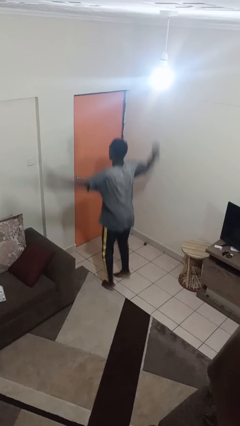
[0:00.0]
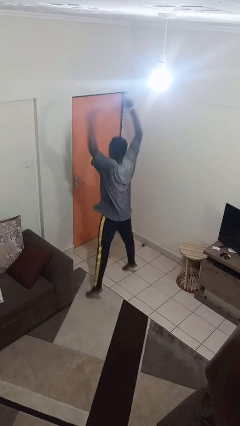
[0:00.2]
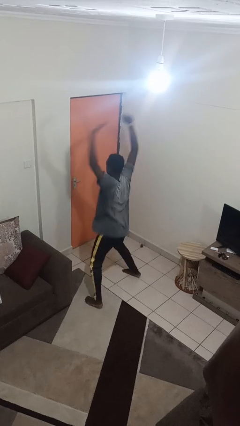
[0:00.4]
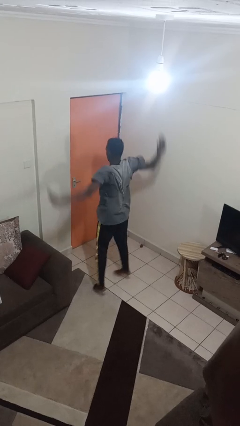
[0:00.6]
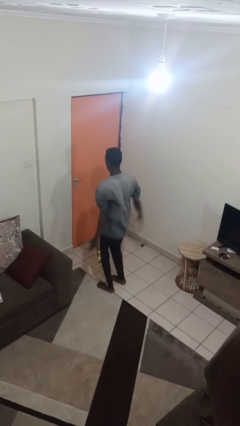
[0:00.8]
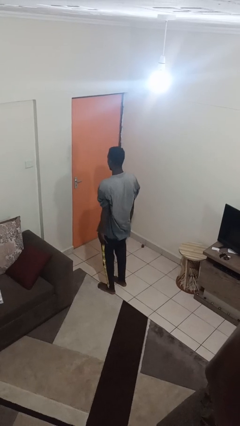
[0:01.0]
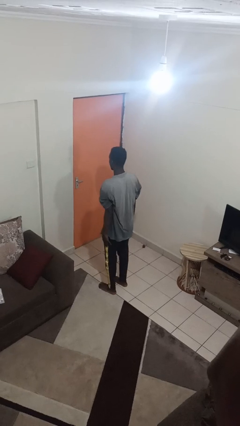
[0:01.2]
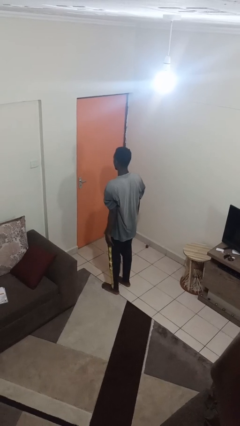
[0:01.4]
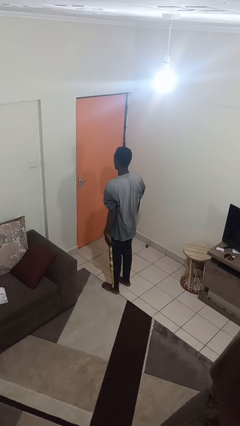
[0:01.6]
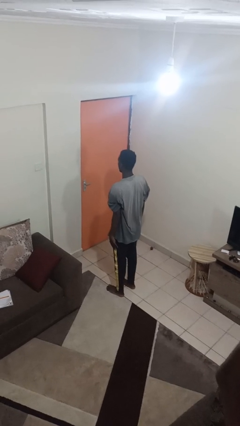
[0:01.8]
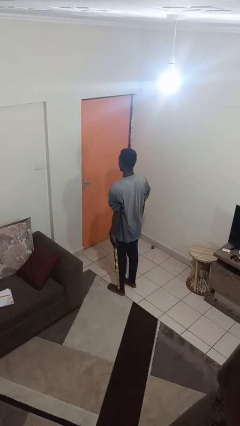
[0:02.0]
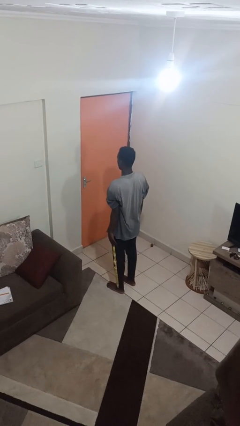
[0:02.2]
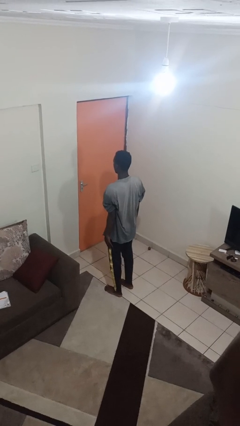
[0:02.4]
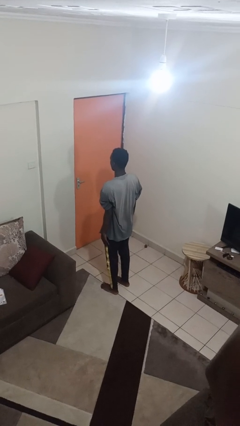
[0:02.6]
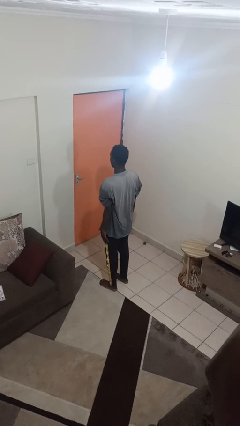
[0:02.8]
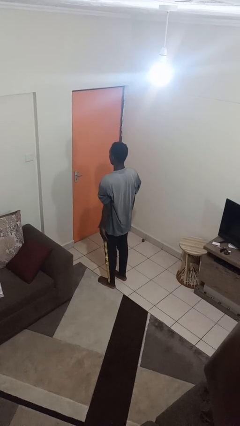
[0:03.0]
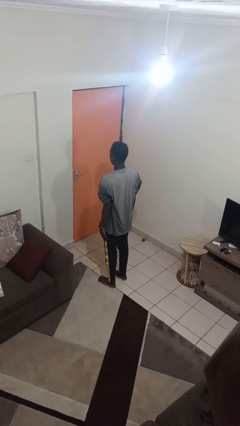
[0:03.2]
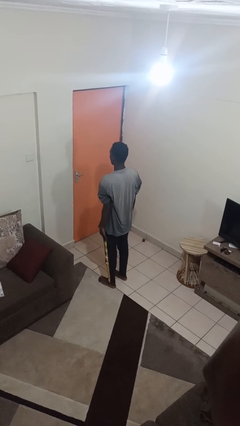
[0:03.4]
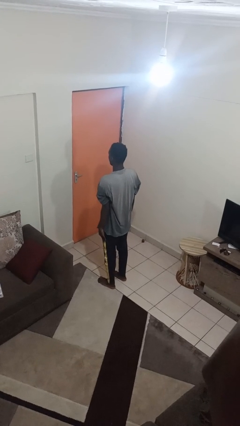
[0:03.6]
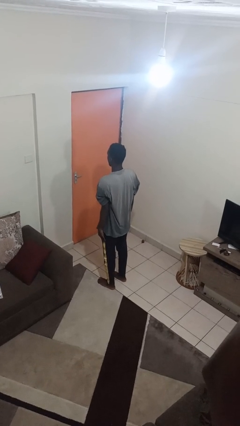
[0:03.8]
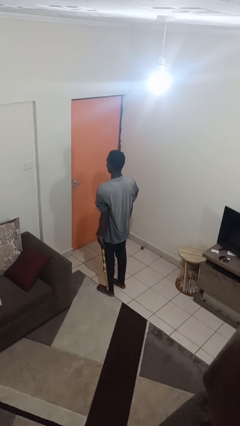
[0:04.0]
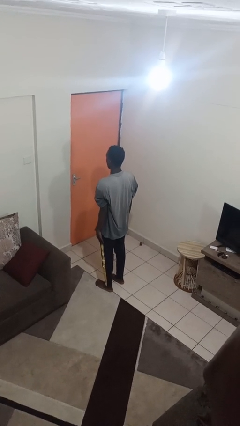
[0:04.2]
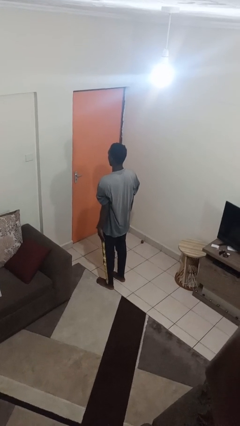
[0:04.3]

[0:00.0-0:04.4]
person exercises with jumping jacks

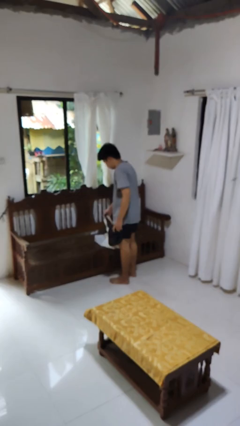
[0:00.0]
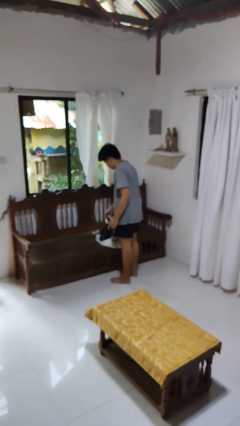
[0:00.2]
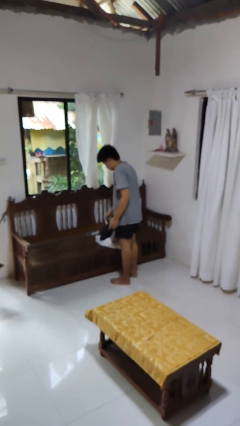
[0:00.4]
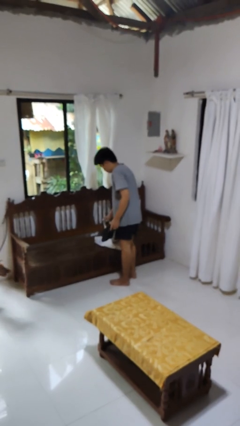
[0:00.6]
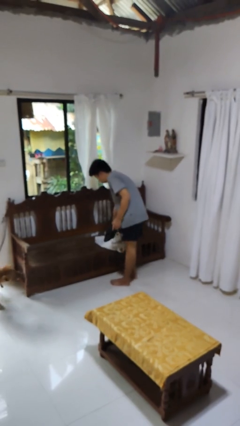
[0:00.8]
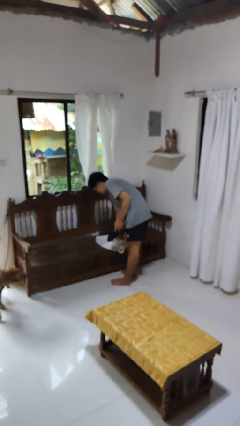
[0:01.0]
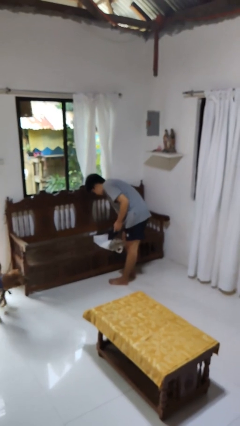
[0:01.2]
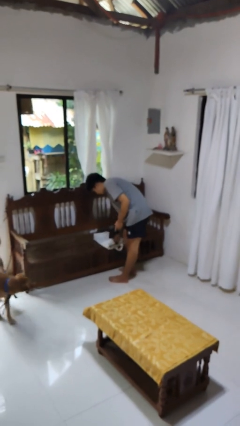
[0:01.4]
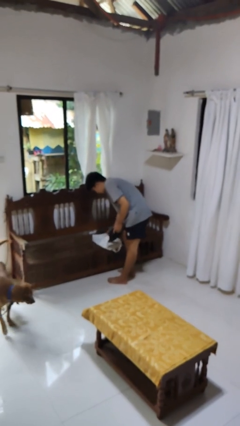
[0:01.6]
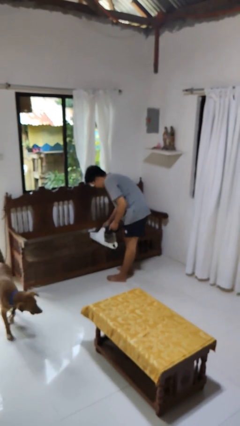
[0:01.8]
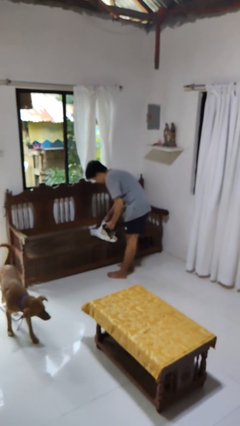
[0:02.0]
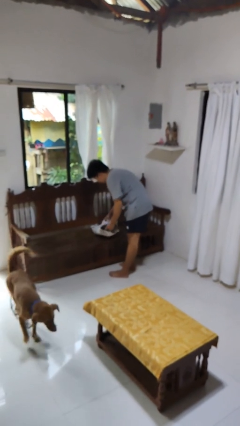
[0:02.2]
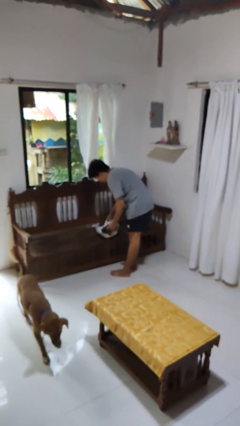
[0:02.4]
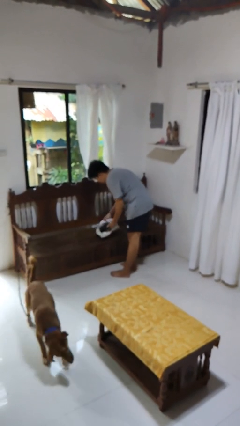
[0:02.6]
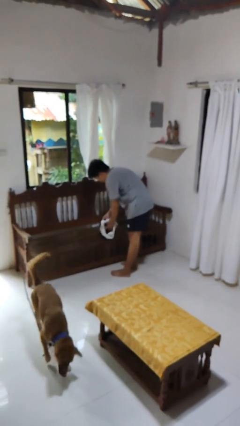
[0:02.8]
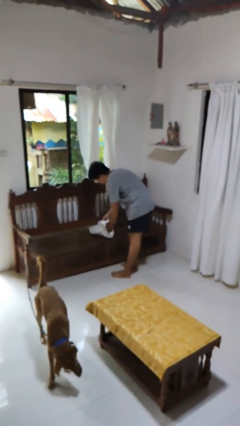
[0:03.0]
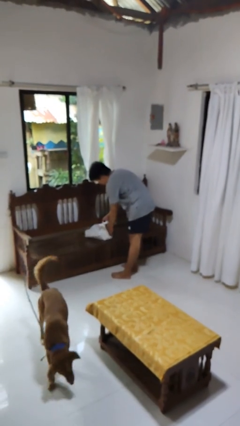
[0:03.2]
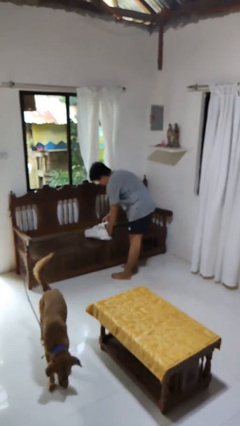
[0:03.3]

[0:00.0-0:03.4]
person puts object into bag

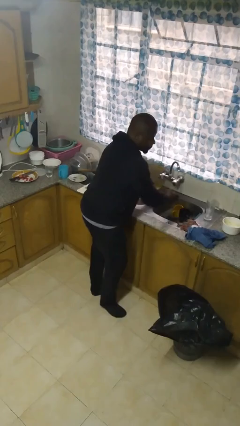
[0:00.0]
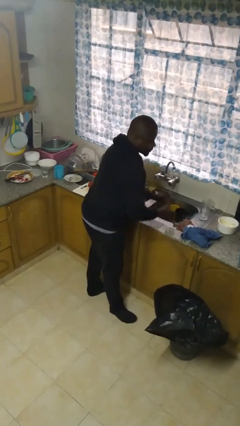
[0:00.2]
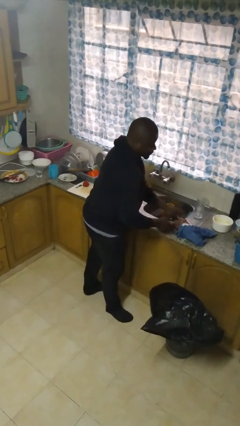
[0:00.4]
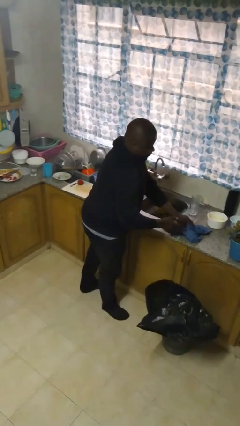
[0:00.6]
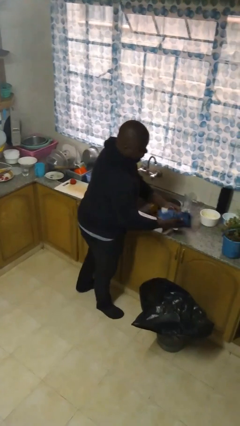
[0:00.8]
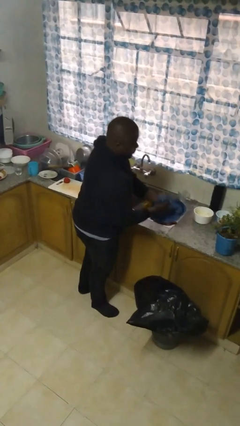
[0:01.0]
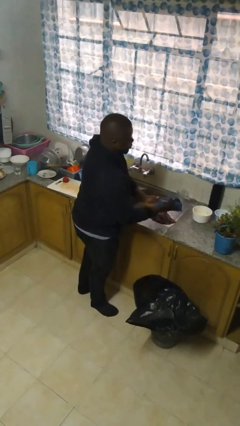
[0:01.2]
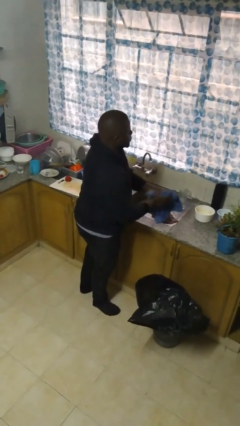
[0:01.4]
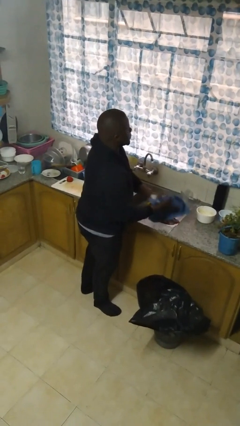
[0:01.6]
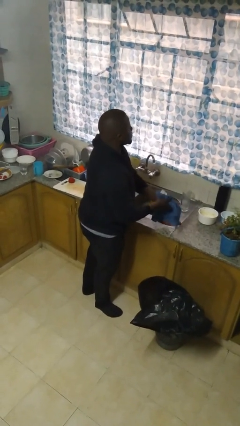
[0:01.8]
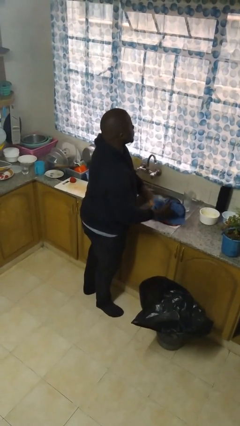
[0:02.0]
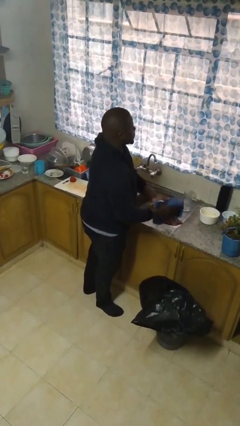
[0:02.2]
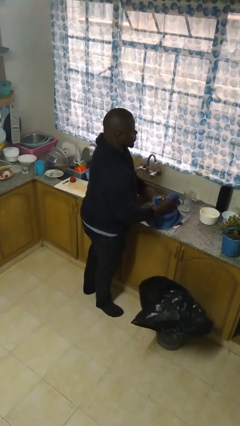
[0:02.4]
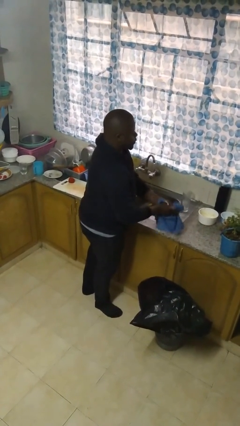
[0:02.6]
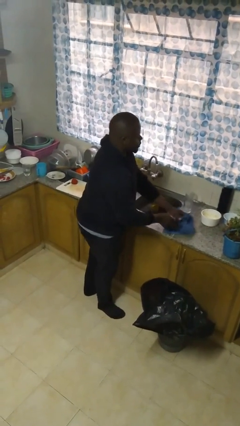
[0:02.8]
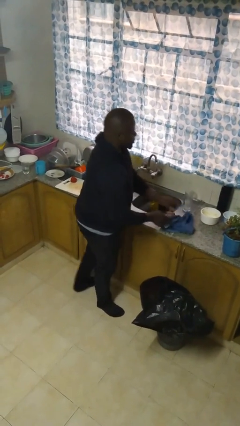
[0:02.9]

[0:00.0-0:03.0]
person dries hands with towel

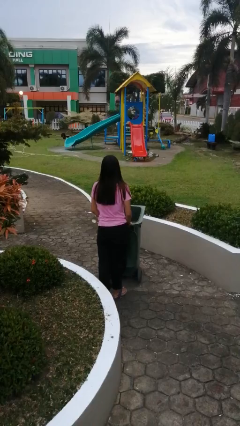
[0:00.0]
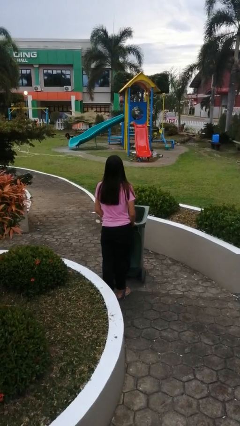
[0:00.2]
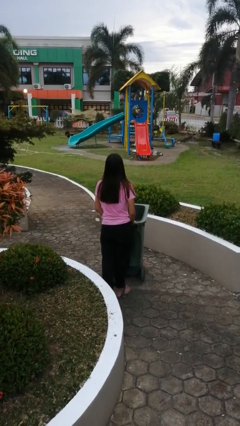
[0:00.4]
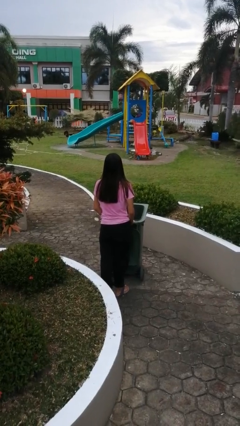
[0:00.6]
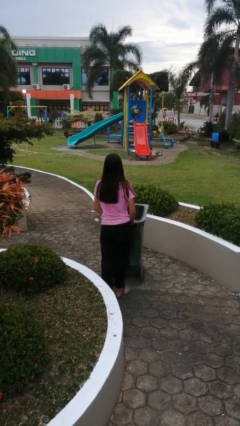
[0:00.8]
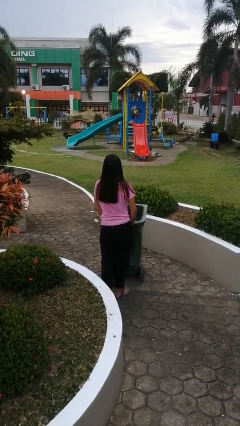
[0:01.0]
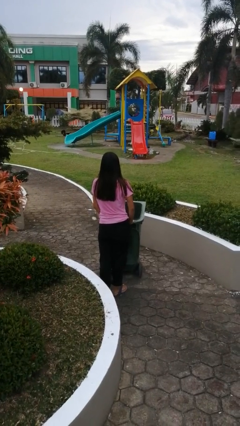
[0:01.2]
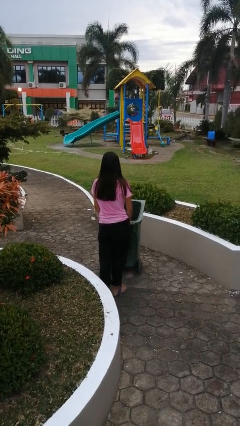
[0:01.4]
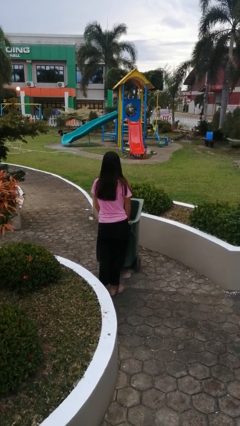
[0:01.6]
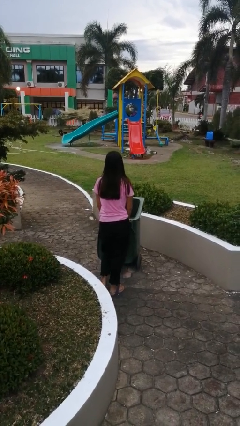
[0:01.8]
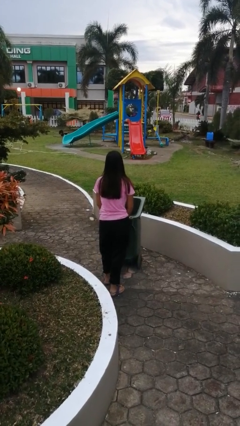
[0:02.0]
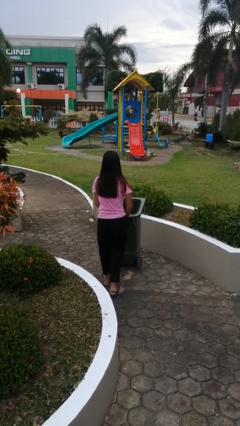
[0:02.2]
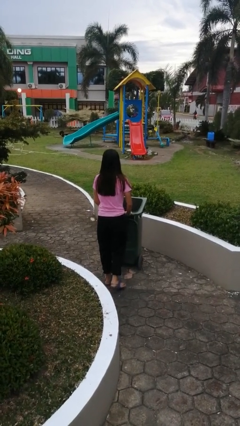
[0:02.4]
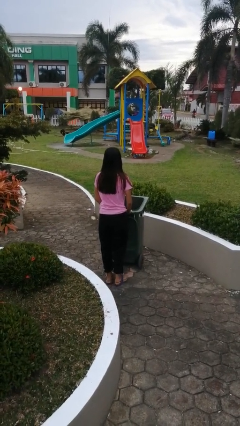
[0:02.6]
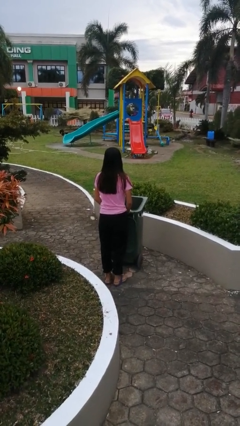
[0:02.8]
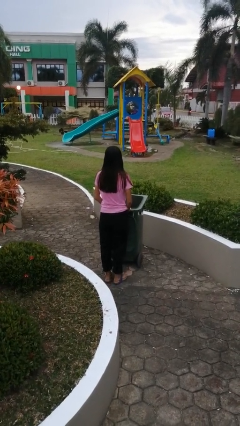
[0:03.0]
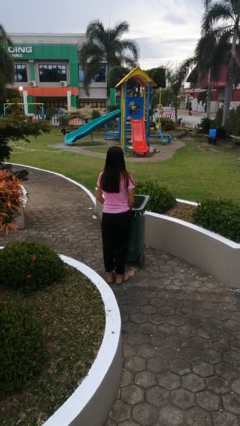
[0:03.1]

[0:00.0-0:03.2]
person pushes wheeled trashcan

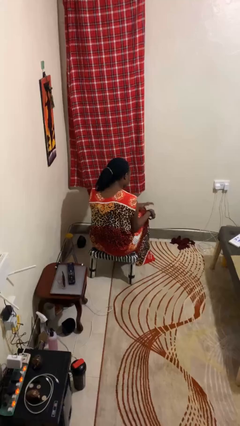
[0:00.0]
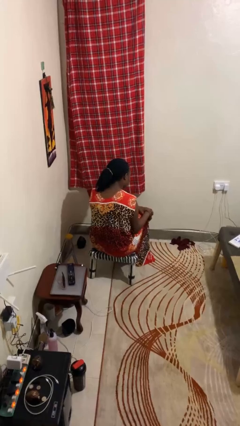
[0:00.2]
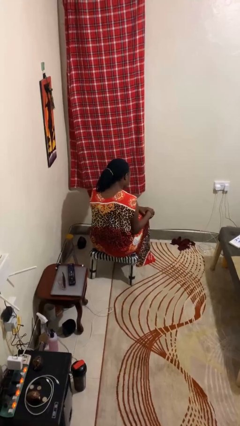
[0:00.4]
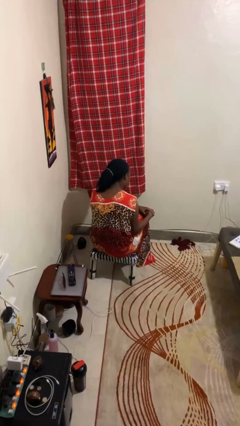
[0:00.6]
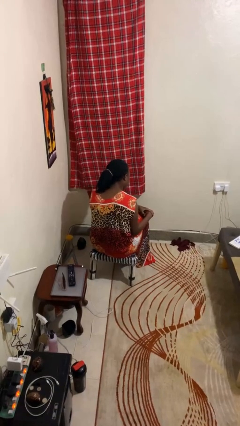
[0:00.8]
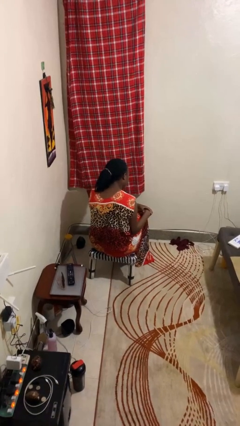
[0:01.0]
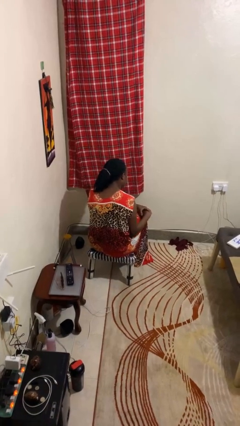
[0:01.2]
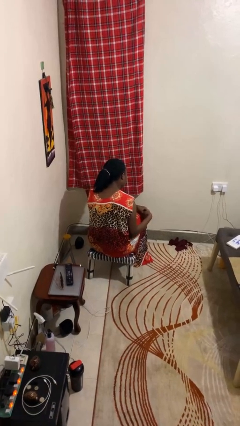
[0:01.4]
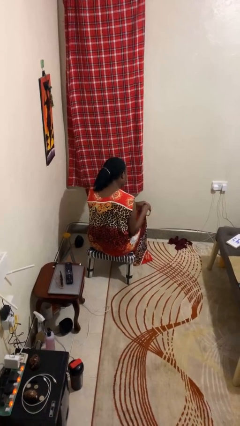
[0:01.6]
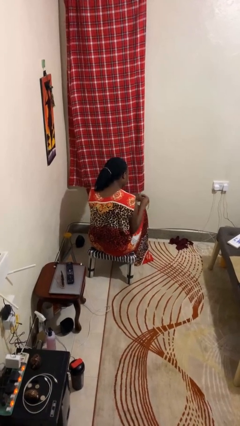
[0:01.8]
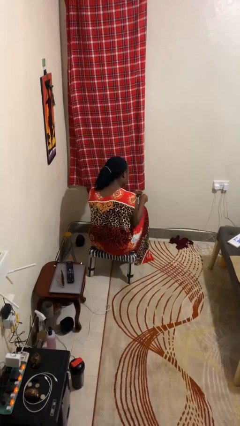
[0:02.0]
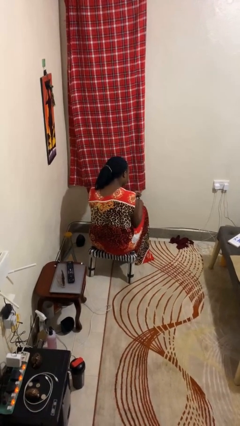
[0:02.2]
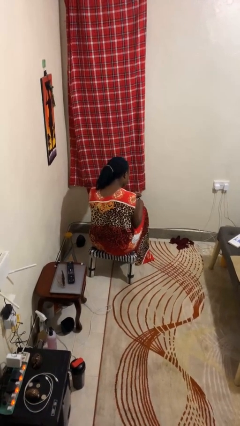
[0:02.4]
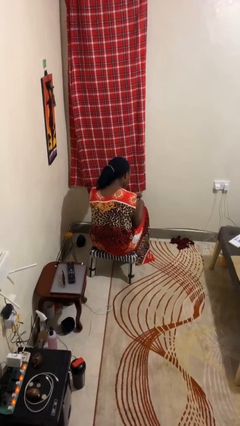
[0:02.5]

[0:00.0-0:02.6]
person takes off wristwatch

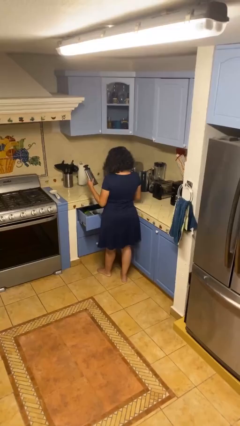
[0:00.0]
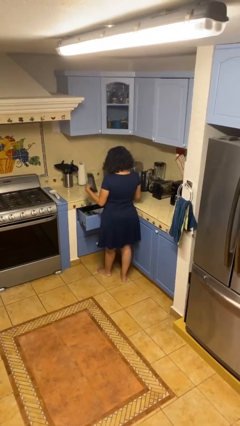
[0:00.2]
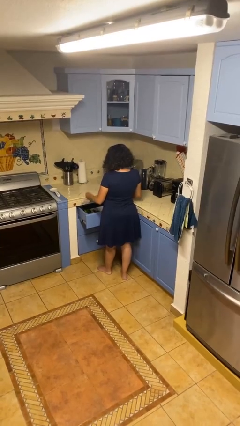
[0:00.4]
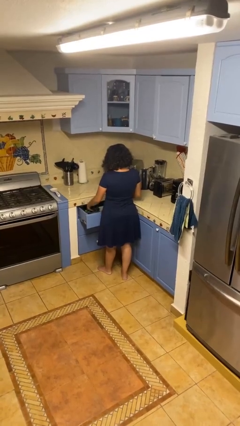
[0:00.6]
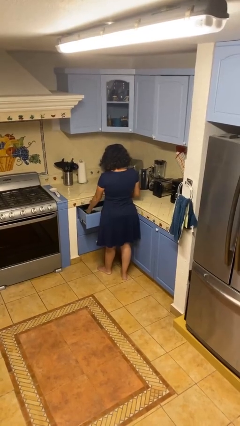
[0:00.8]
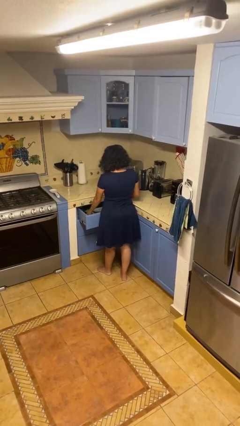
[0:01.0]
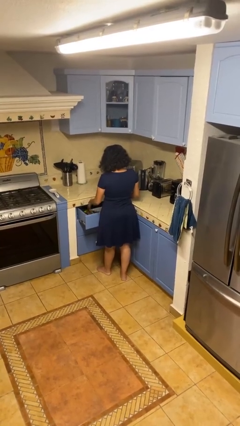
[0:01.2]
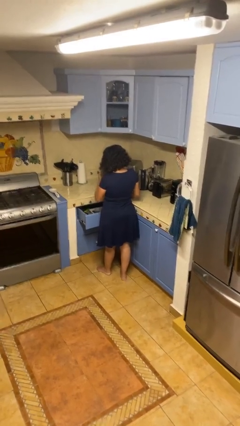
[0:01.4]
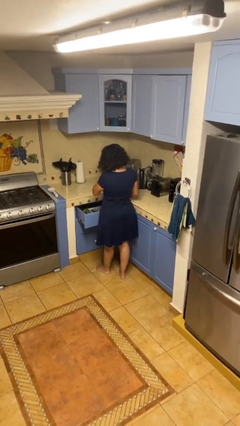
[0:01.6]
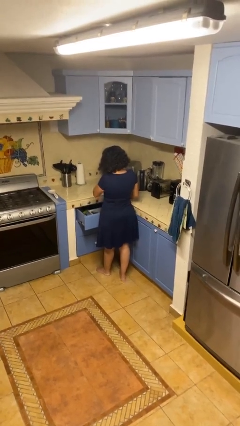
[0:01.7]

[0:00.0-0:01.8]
person puts object into kitchen drawer
